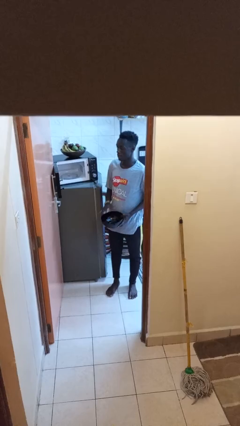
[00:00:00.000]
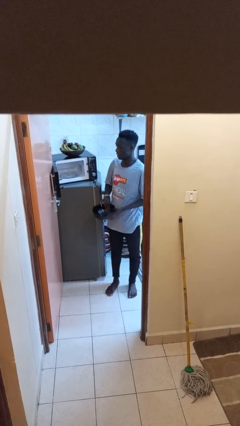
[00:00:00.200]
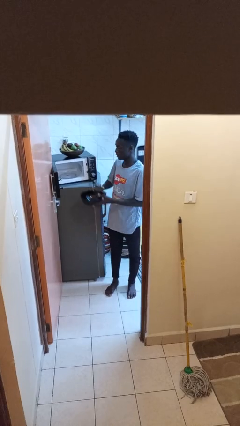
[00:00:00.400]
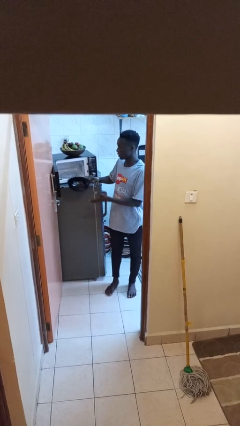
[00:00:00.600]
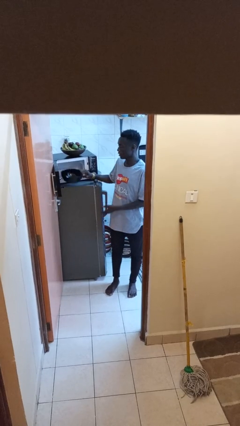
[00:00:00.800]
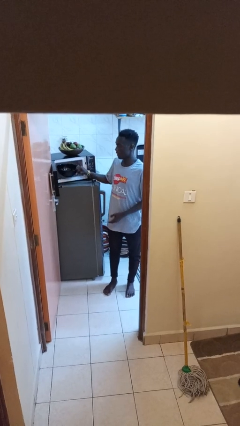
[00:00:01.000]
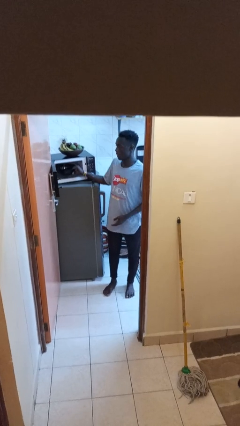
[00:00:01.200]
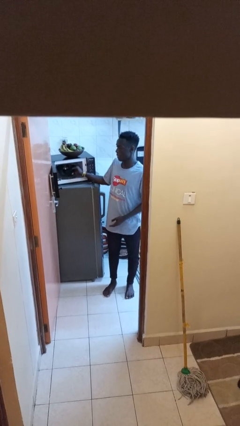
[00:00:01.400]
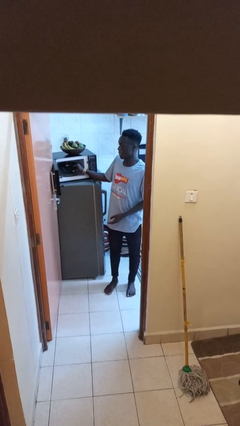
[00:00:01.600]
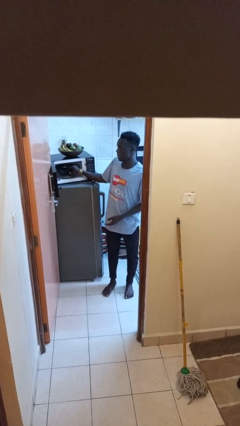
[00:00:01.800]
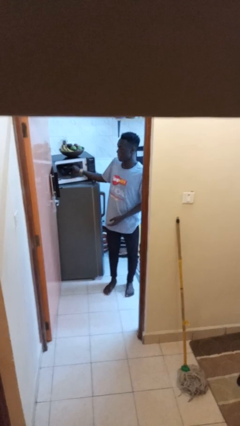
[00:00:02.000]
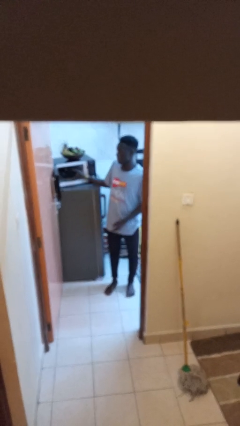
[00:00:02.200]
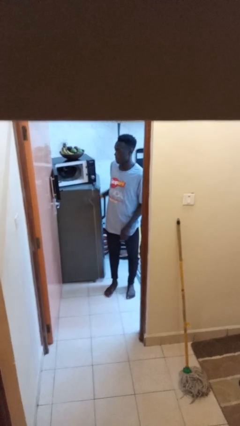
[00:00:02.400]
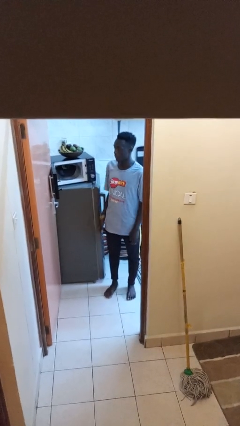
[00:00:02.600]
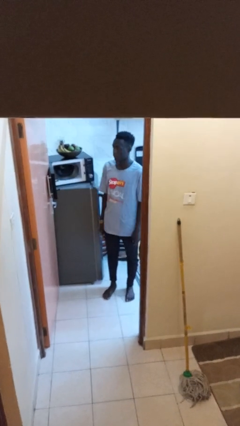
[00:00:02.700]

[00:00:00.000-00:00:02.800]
person puts object into microwave

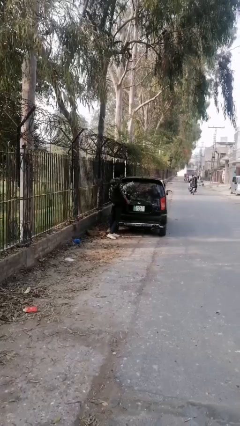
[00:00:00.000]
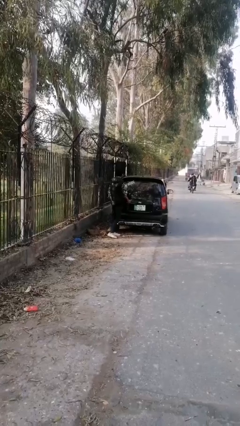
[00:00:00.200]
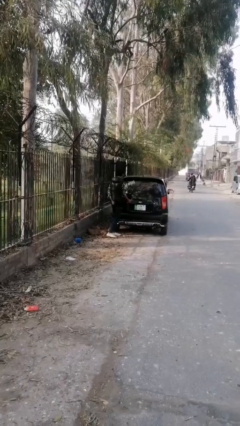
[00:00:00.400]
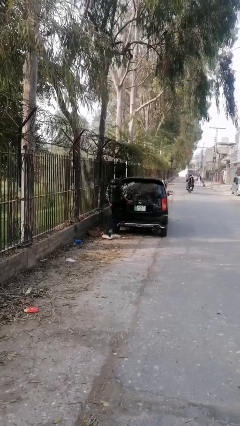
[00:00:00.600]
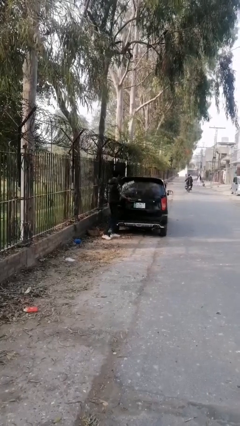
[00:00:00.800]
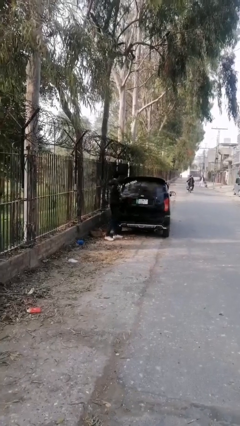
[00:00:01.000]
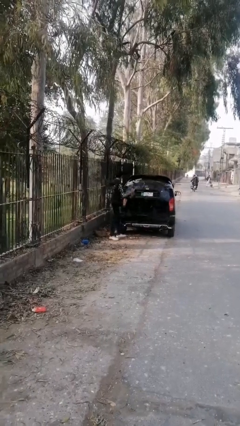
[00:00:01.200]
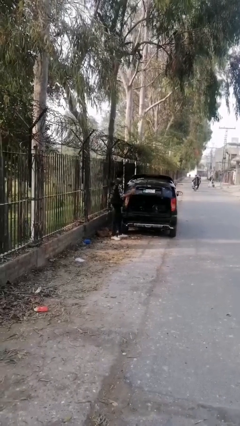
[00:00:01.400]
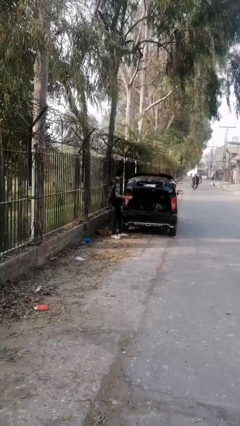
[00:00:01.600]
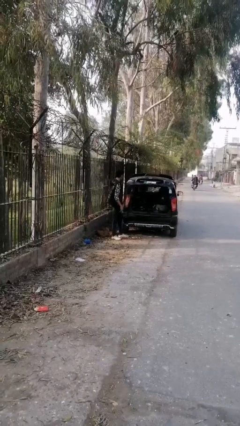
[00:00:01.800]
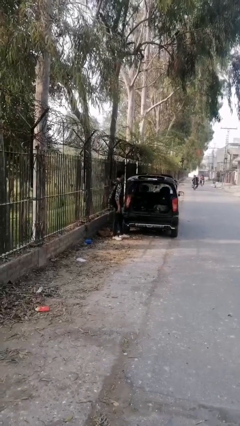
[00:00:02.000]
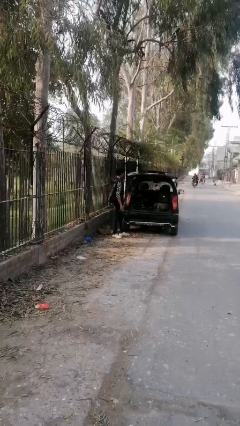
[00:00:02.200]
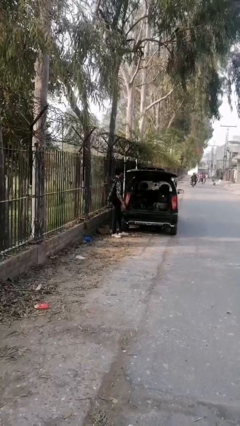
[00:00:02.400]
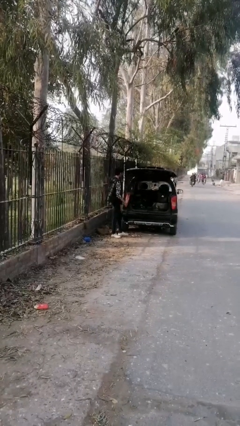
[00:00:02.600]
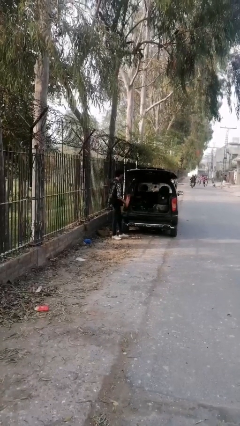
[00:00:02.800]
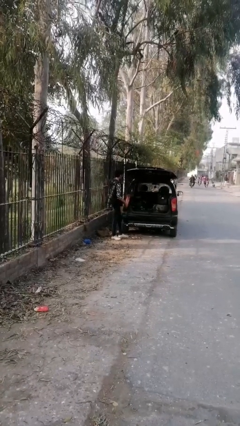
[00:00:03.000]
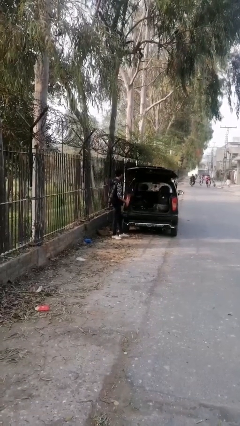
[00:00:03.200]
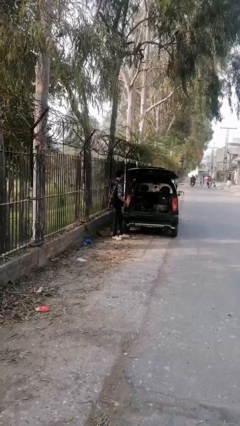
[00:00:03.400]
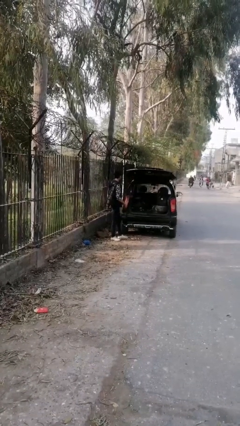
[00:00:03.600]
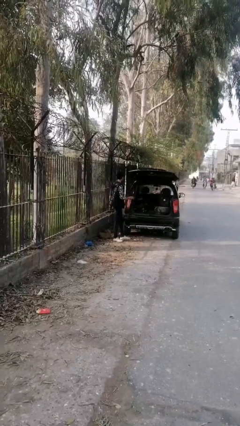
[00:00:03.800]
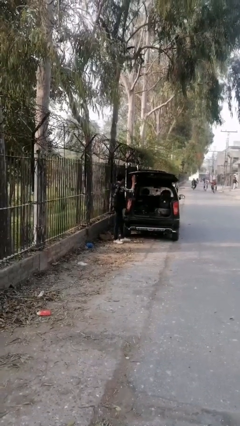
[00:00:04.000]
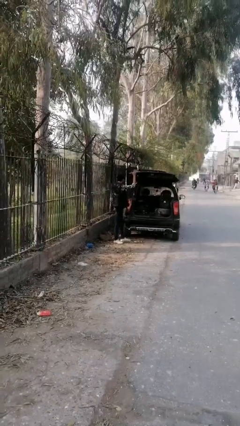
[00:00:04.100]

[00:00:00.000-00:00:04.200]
person opens car trunk

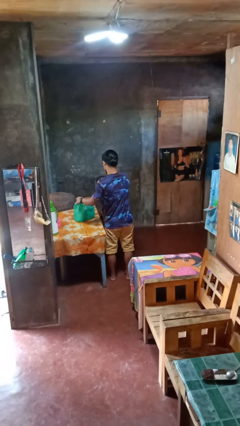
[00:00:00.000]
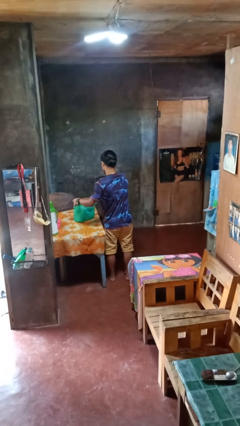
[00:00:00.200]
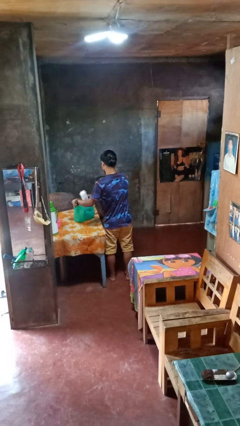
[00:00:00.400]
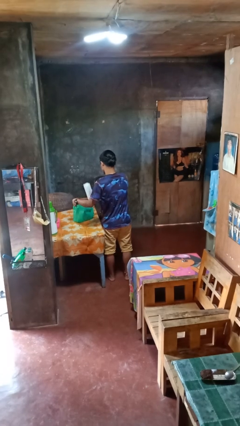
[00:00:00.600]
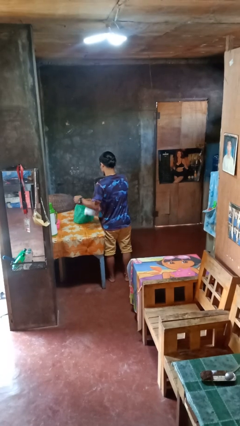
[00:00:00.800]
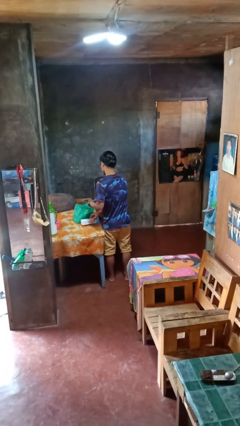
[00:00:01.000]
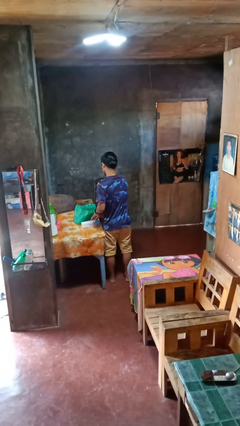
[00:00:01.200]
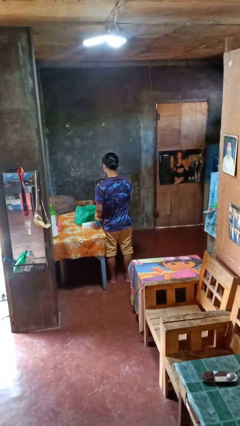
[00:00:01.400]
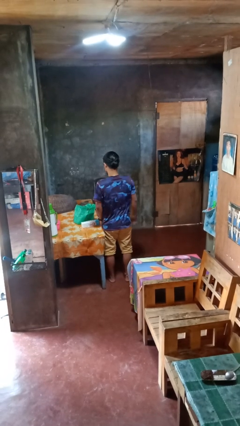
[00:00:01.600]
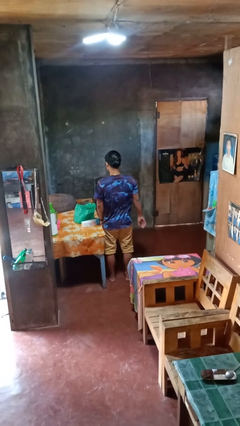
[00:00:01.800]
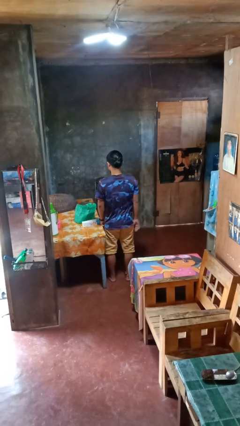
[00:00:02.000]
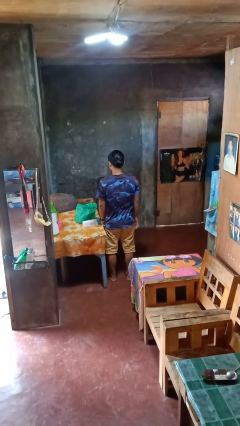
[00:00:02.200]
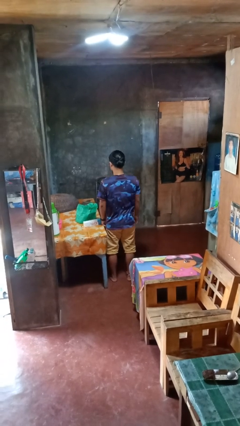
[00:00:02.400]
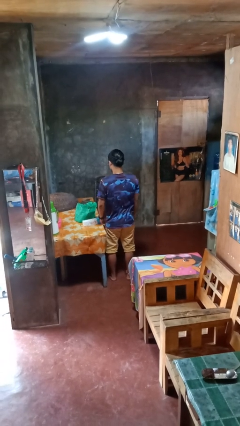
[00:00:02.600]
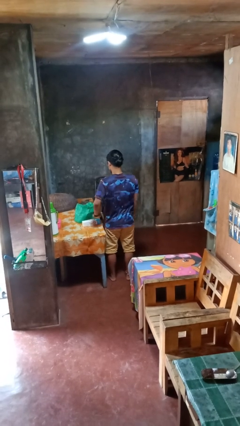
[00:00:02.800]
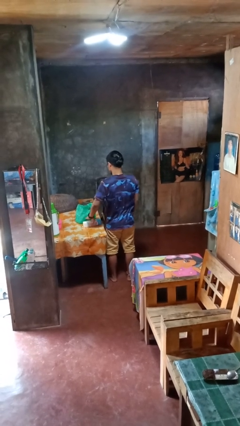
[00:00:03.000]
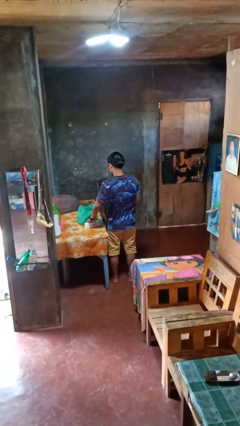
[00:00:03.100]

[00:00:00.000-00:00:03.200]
person takes object from bag

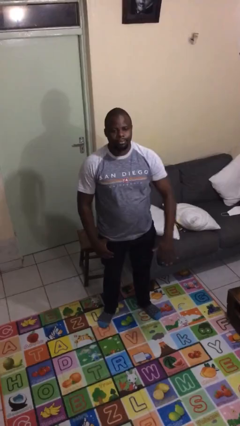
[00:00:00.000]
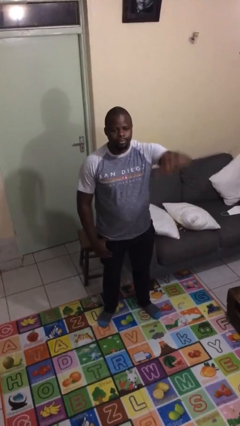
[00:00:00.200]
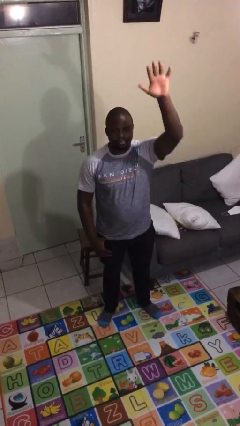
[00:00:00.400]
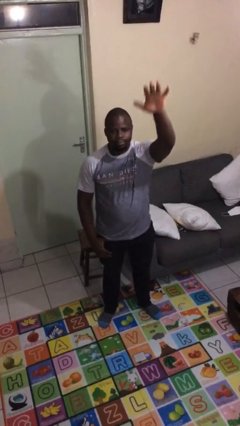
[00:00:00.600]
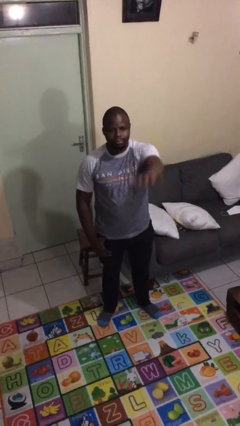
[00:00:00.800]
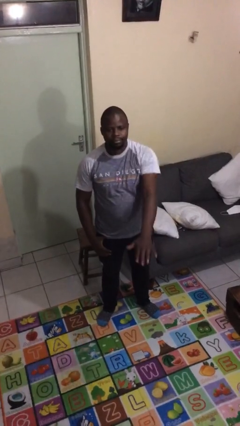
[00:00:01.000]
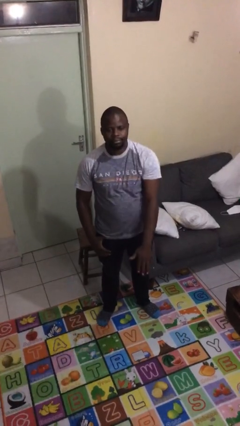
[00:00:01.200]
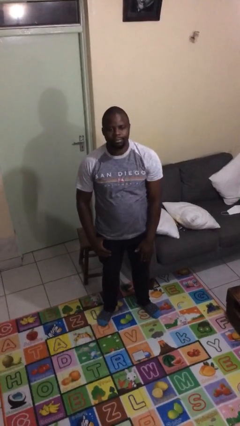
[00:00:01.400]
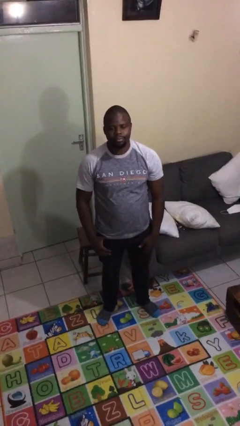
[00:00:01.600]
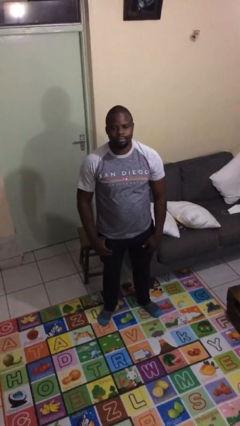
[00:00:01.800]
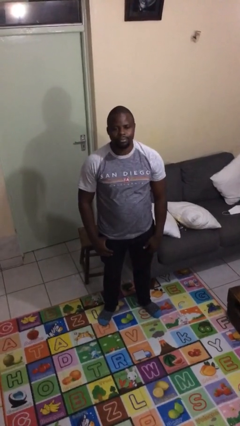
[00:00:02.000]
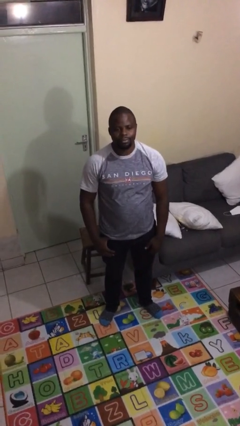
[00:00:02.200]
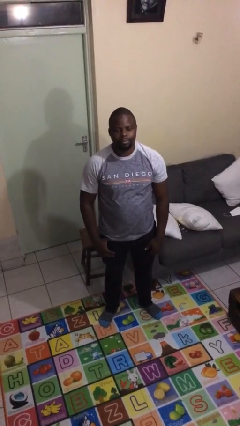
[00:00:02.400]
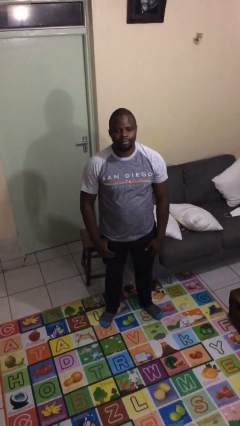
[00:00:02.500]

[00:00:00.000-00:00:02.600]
person gestures swipe down

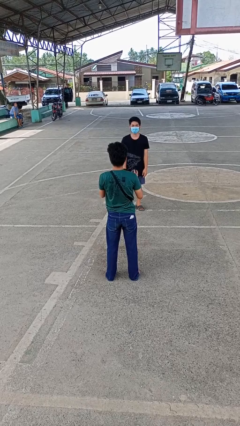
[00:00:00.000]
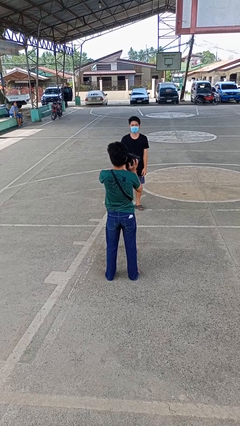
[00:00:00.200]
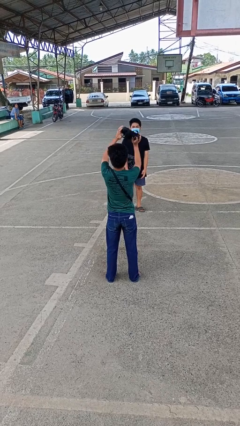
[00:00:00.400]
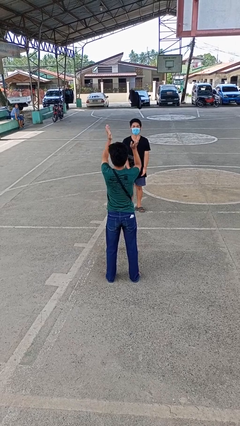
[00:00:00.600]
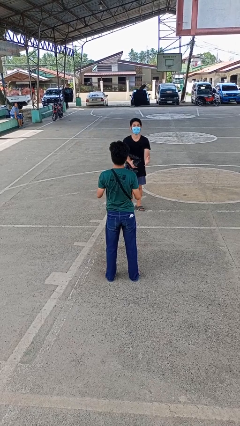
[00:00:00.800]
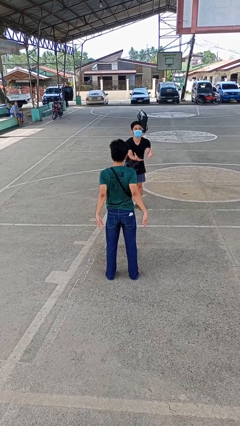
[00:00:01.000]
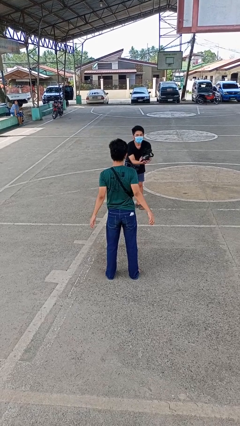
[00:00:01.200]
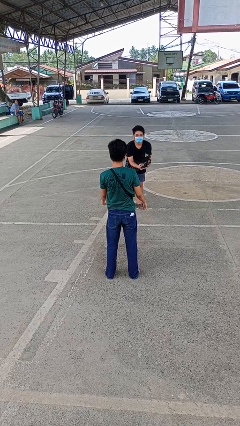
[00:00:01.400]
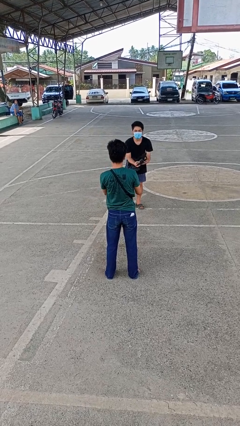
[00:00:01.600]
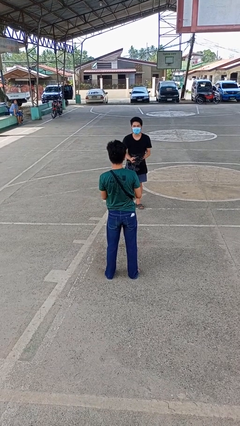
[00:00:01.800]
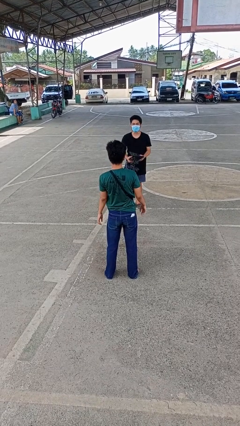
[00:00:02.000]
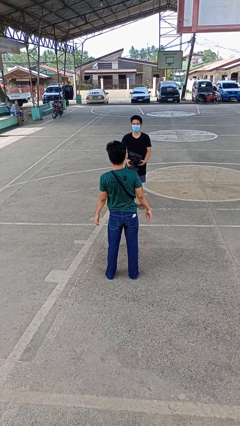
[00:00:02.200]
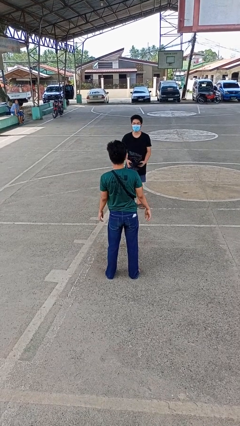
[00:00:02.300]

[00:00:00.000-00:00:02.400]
person throws object to person

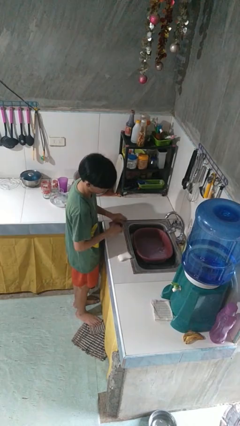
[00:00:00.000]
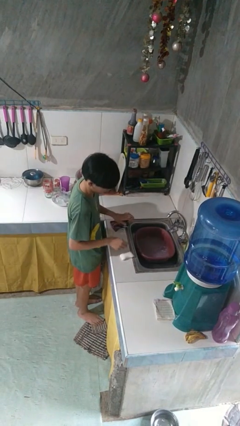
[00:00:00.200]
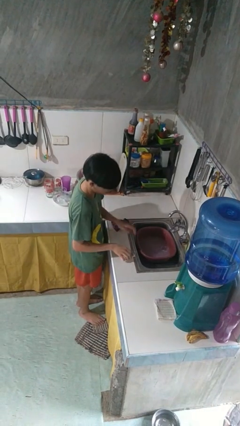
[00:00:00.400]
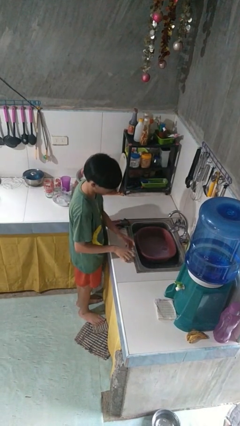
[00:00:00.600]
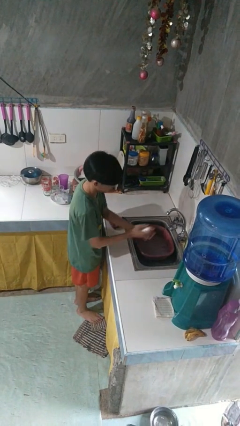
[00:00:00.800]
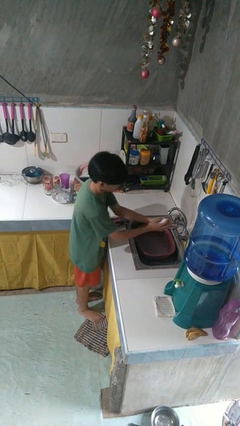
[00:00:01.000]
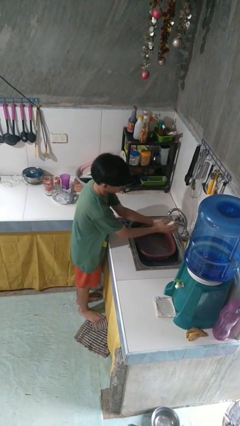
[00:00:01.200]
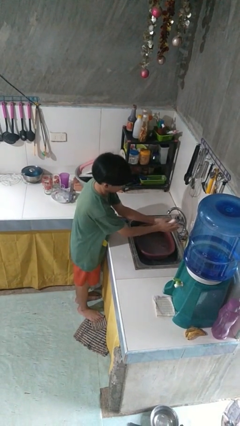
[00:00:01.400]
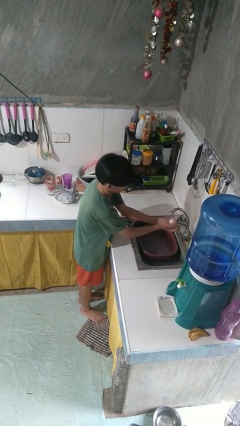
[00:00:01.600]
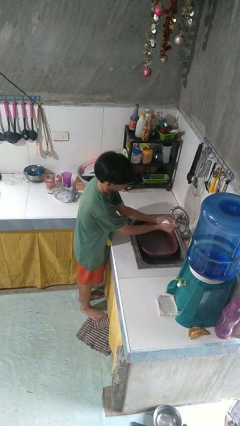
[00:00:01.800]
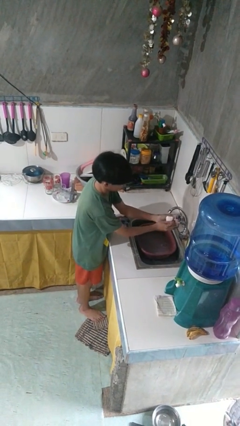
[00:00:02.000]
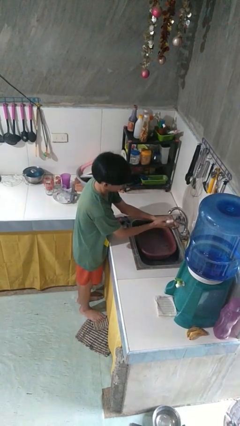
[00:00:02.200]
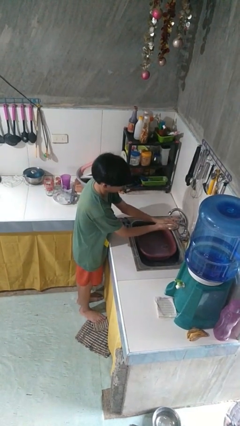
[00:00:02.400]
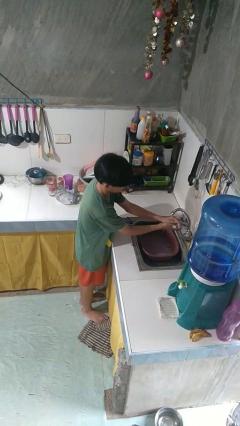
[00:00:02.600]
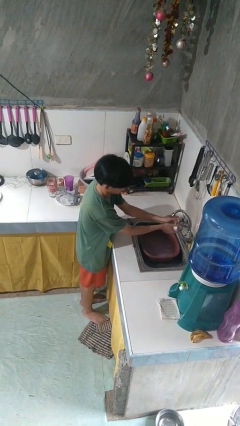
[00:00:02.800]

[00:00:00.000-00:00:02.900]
person washes hands
